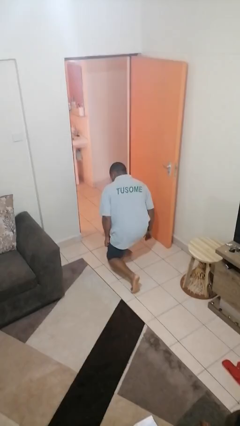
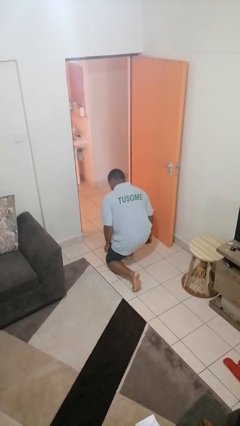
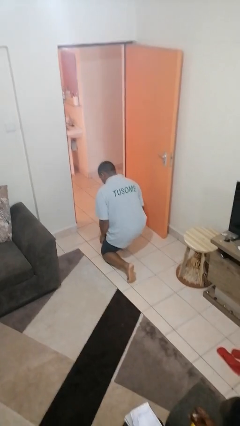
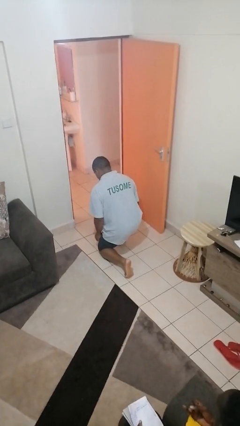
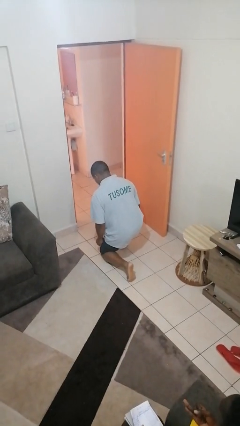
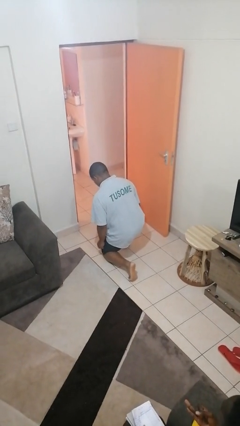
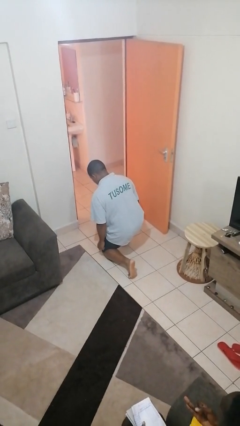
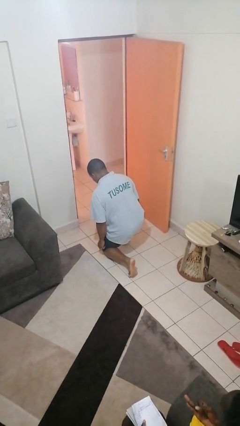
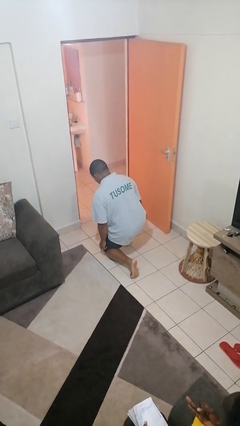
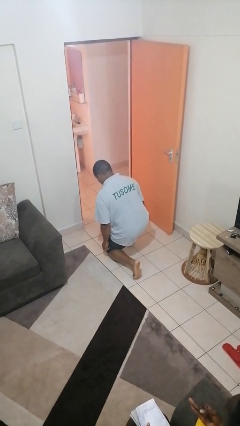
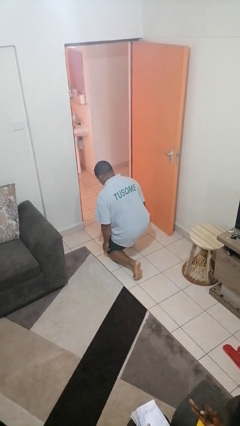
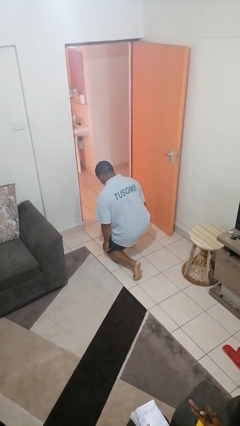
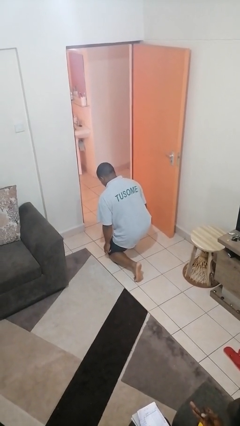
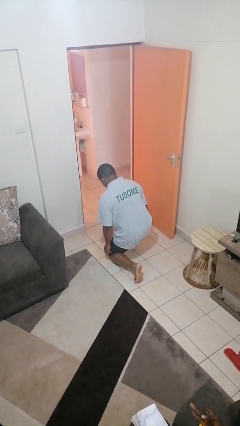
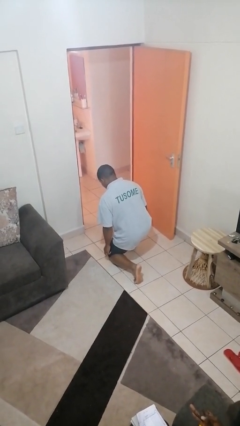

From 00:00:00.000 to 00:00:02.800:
person kneels

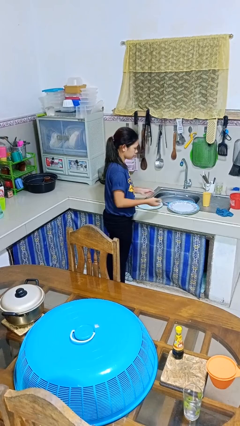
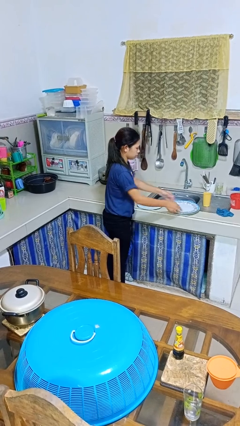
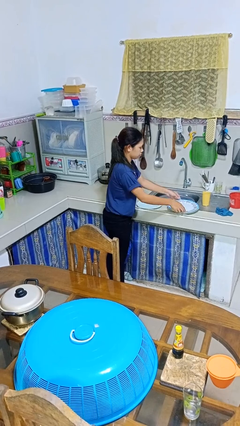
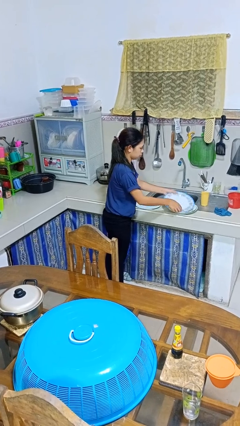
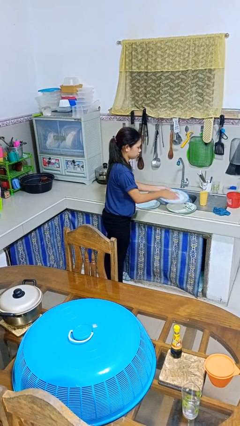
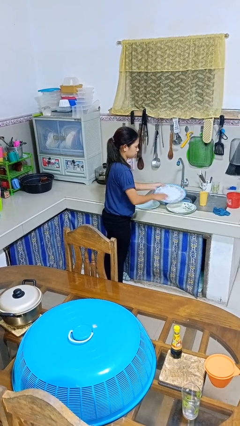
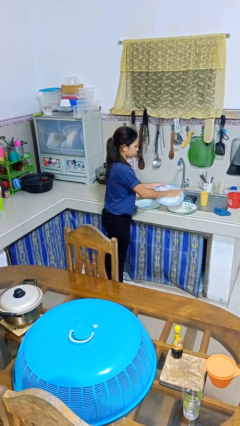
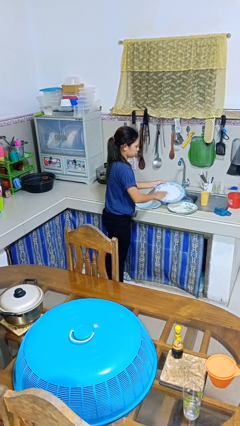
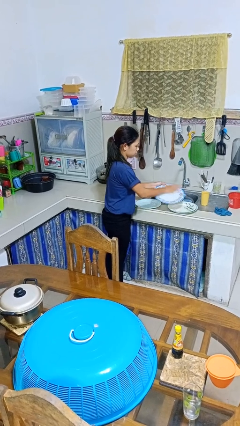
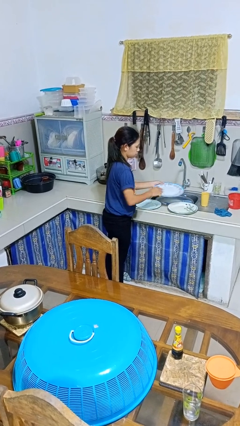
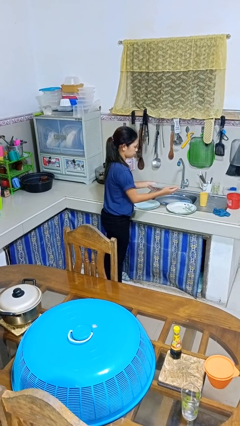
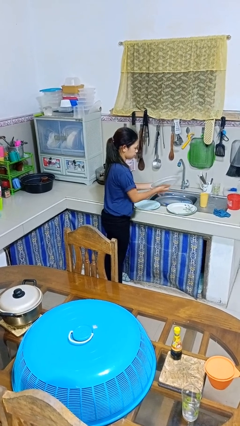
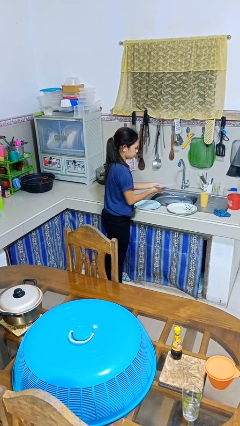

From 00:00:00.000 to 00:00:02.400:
person washes dish

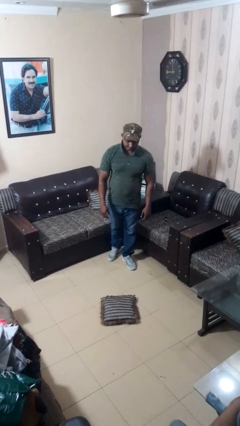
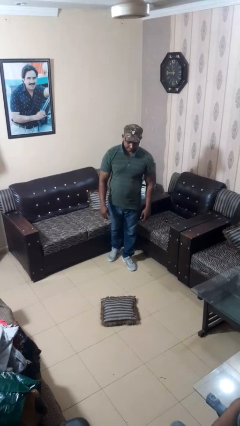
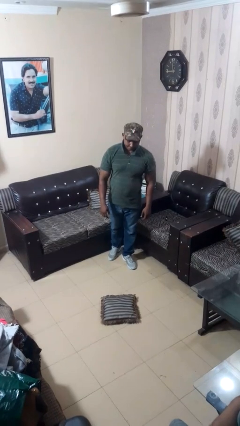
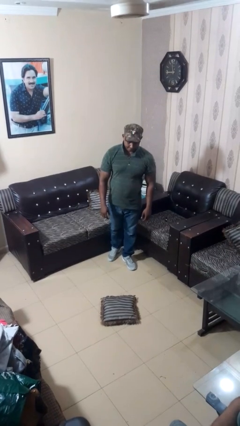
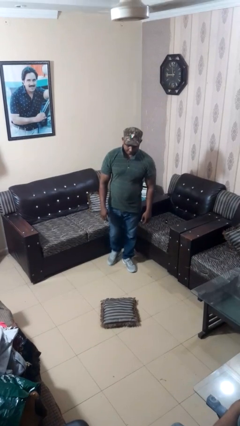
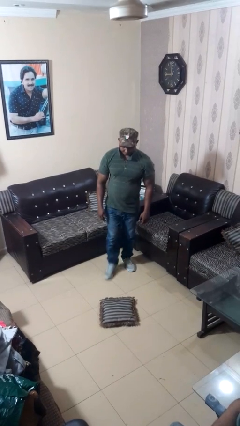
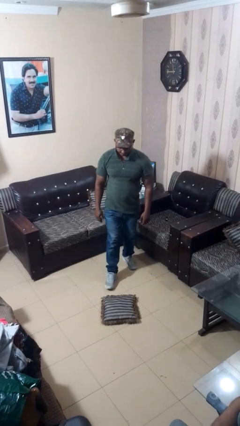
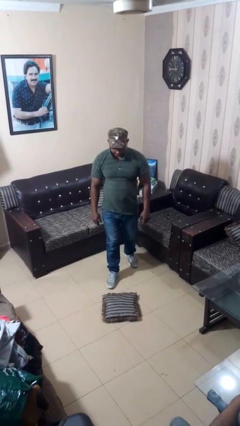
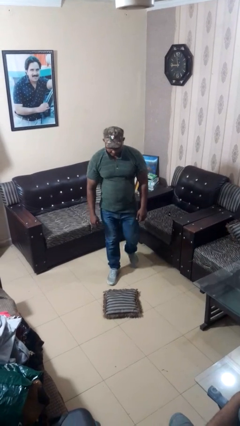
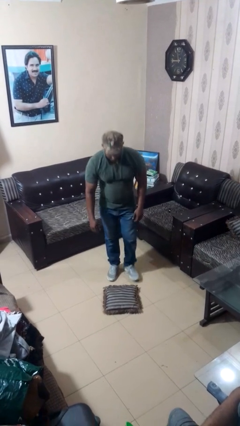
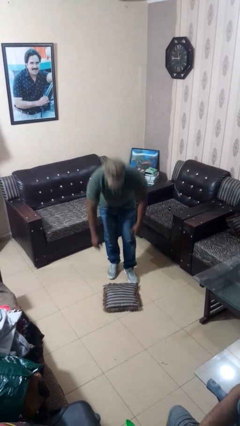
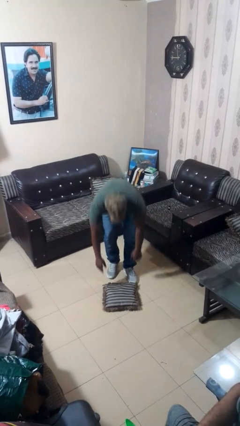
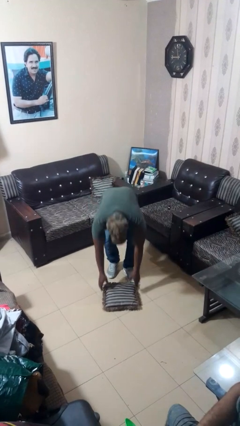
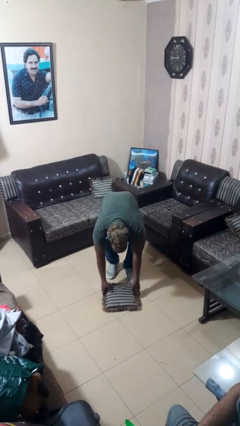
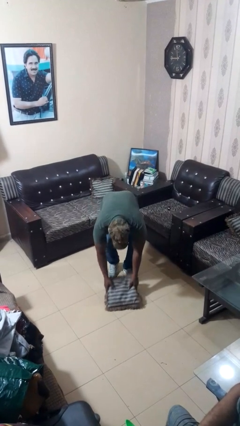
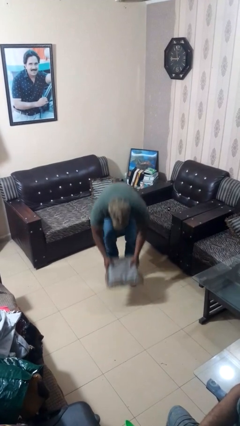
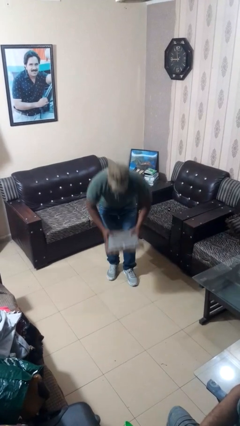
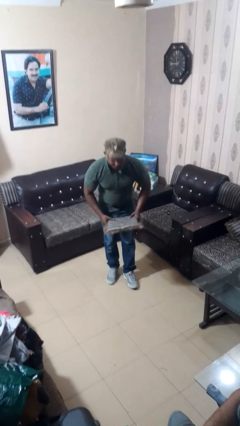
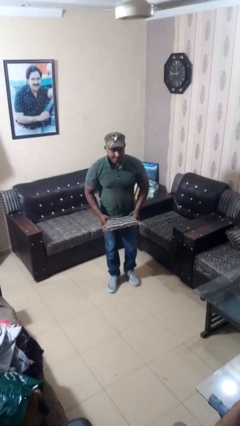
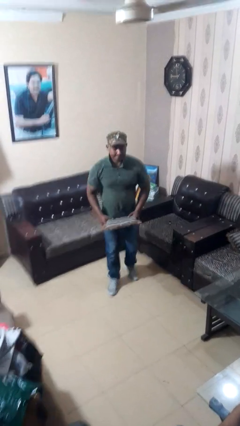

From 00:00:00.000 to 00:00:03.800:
person picks up object from floor

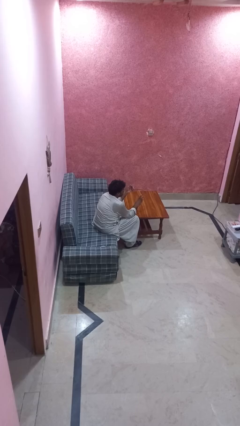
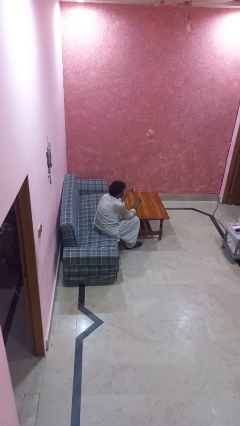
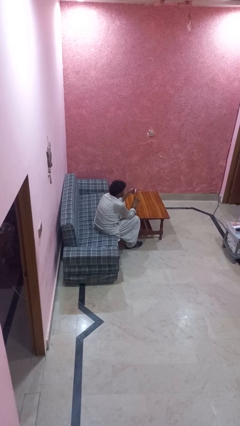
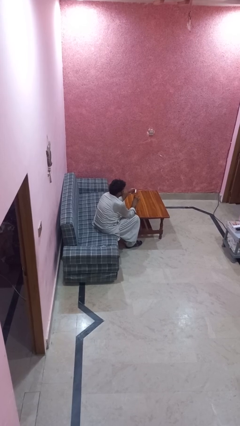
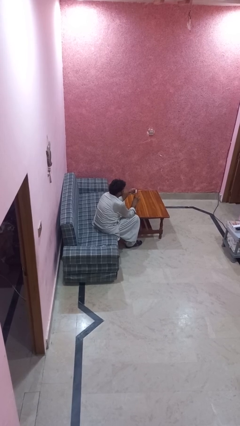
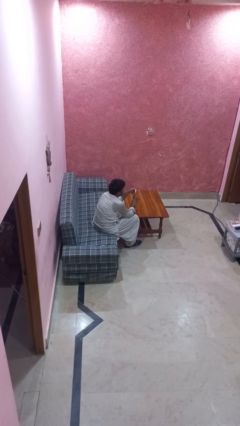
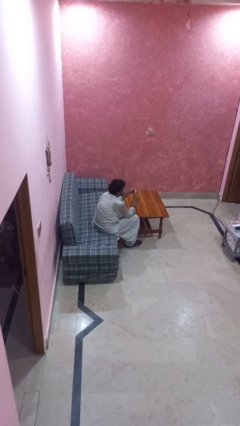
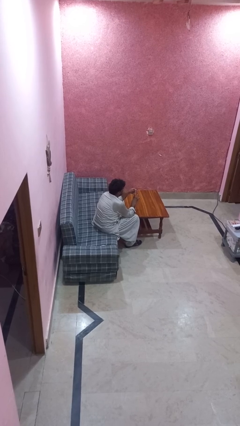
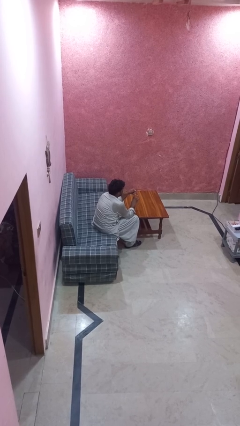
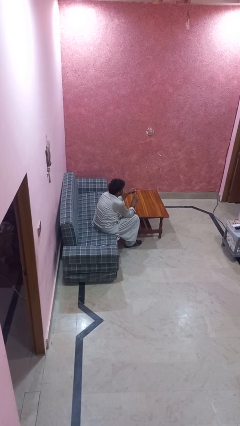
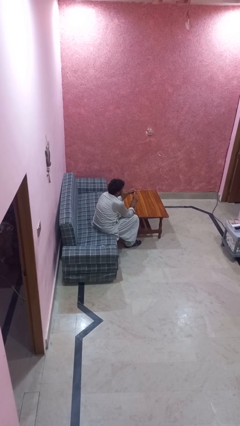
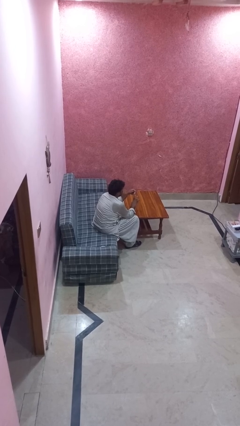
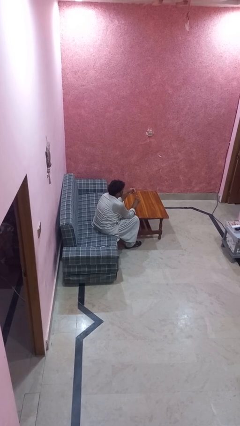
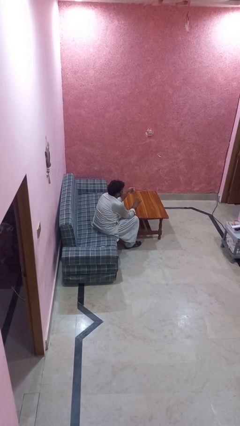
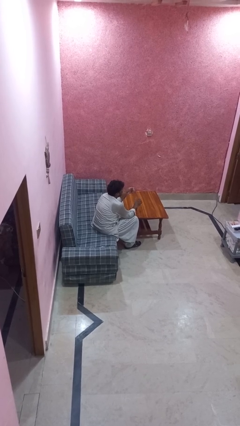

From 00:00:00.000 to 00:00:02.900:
person clips fingernails

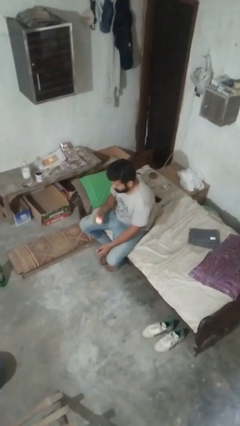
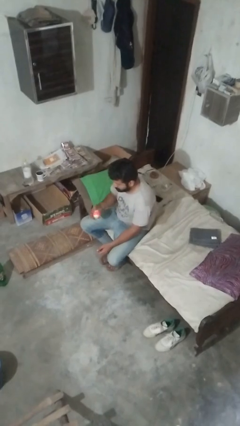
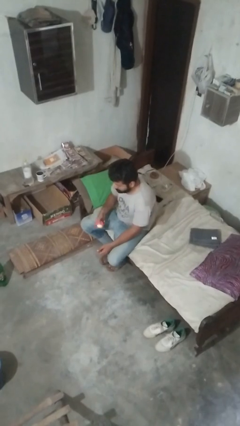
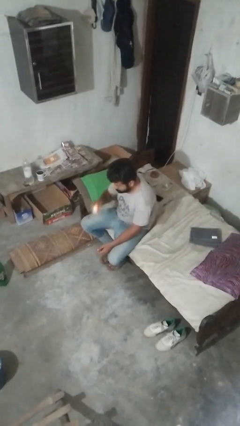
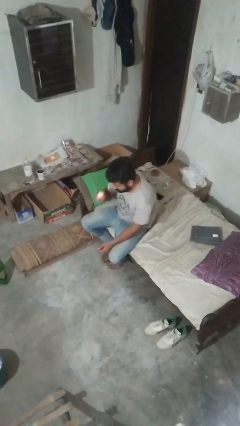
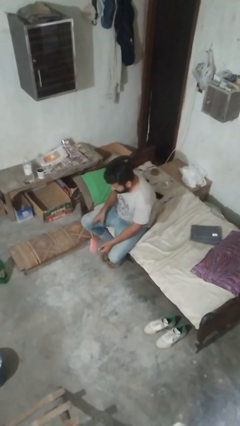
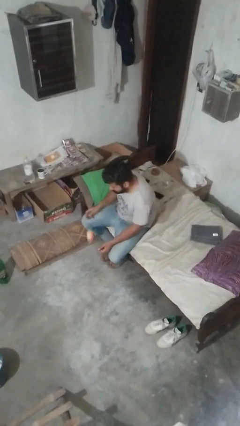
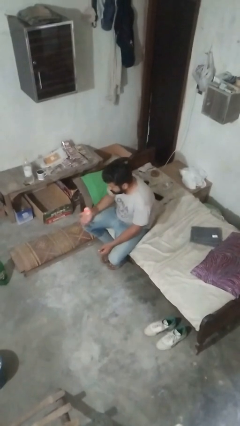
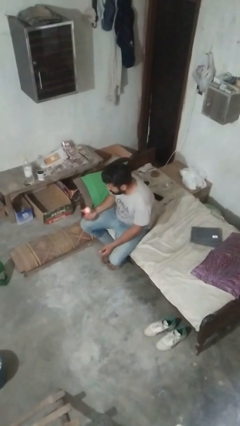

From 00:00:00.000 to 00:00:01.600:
person bounces ball on floor

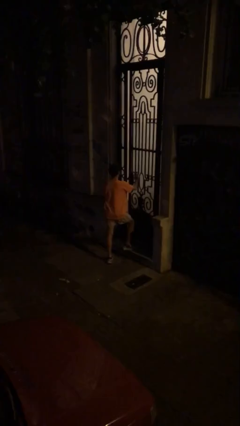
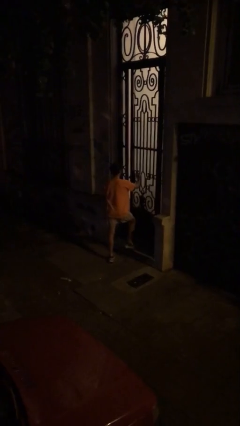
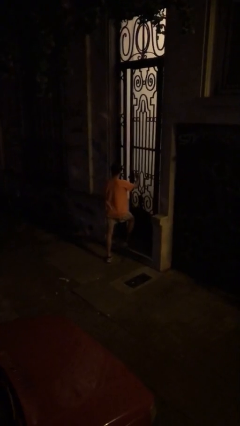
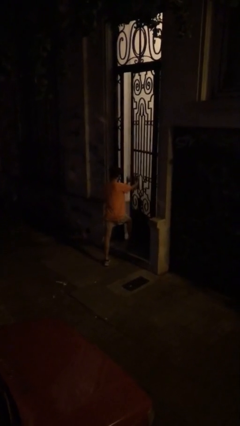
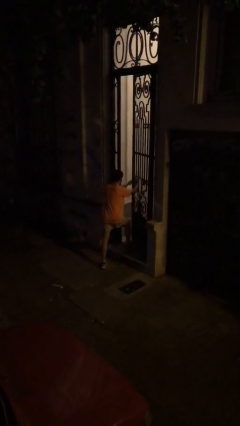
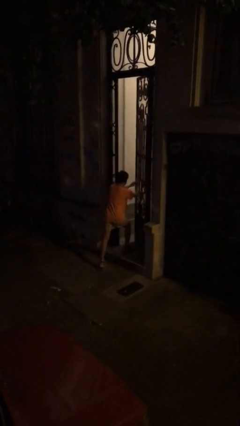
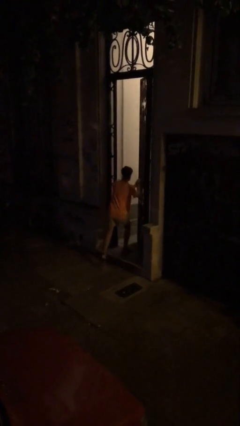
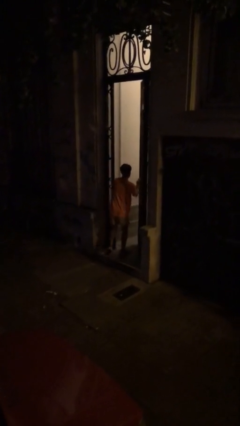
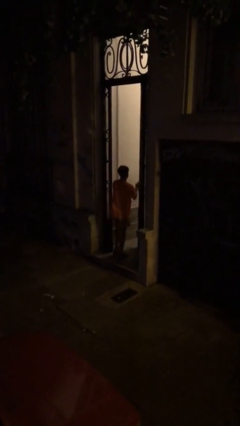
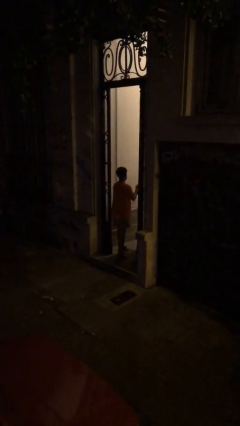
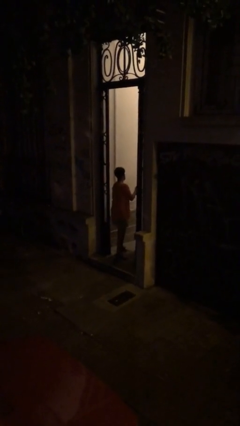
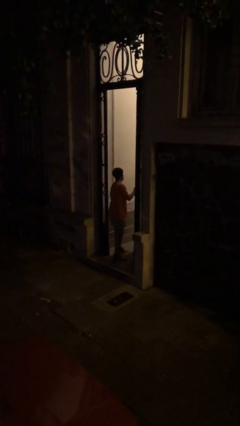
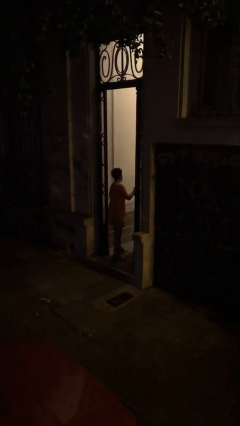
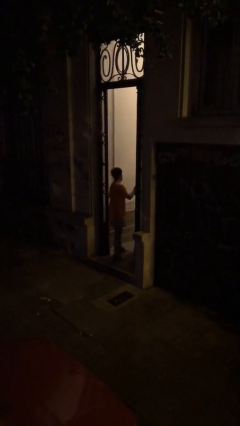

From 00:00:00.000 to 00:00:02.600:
person opens facility door

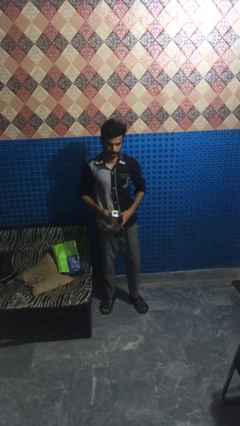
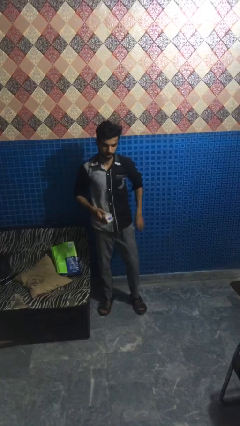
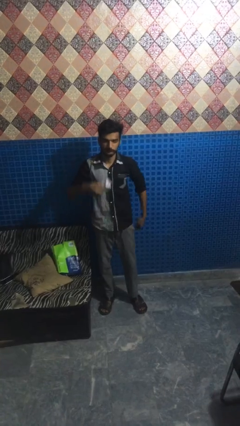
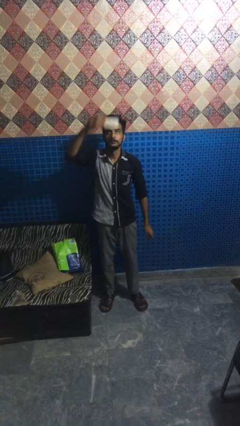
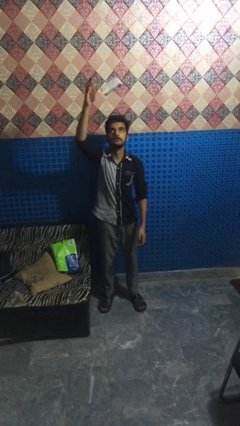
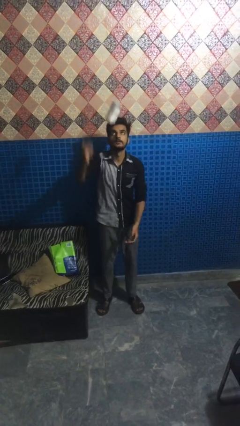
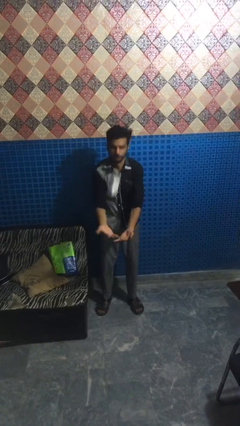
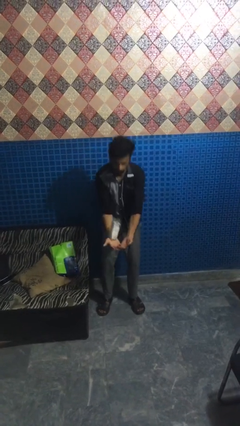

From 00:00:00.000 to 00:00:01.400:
person drops object
